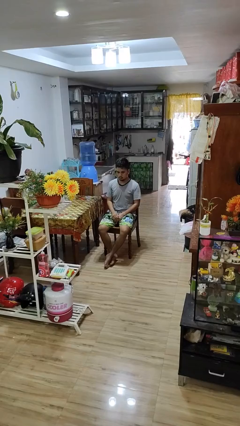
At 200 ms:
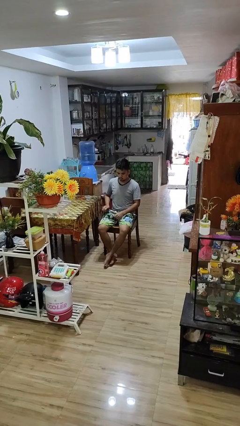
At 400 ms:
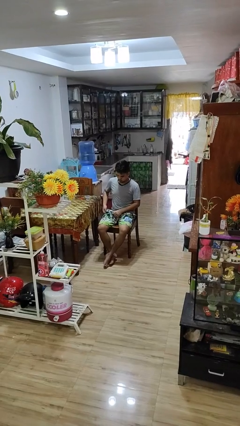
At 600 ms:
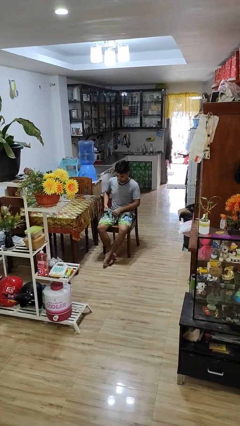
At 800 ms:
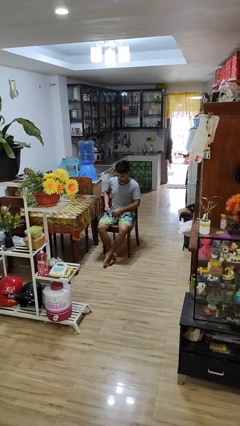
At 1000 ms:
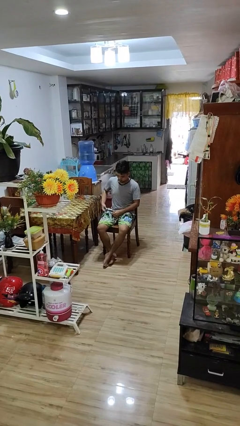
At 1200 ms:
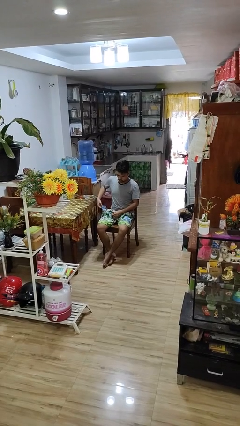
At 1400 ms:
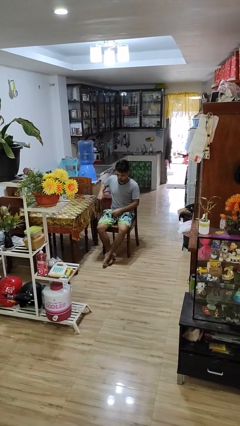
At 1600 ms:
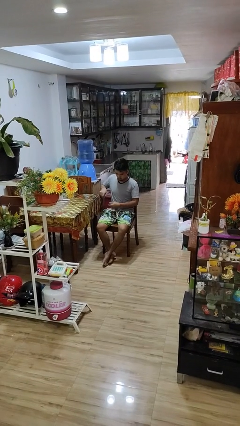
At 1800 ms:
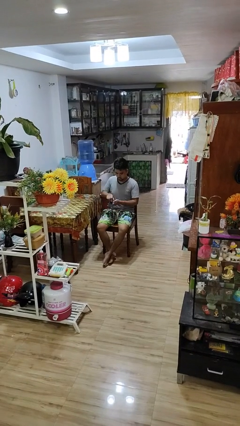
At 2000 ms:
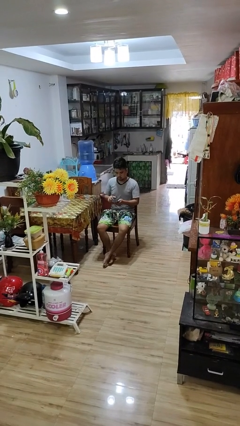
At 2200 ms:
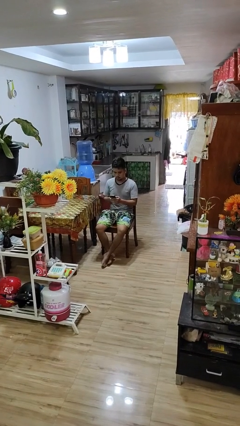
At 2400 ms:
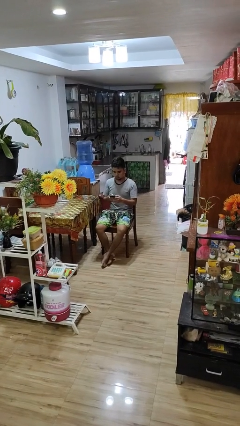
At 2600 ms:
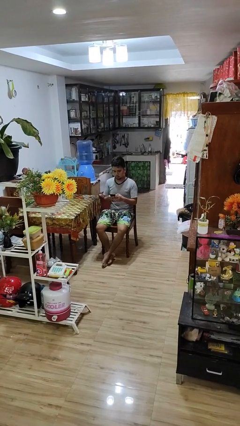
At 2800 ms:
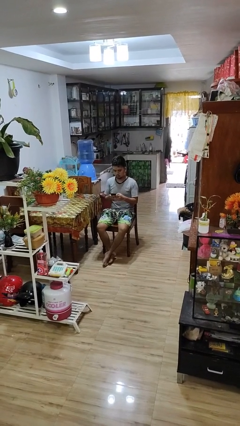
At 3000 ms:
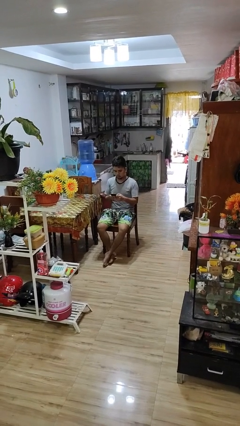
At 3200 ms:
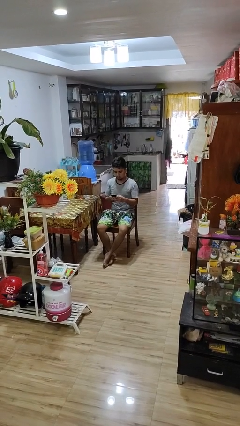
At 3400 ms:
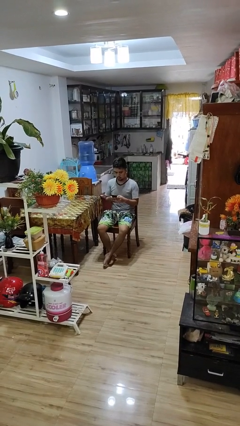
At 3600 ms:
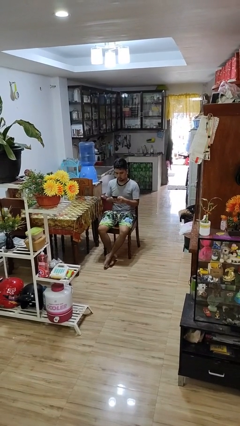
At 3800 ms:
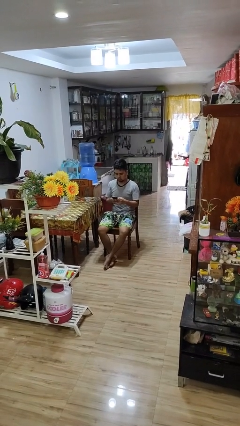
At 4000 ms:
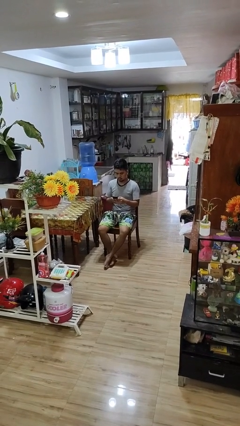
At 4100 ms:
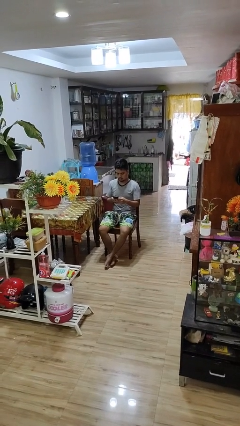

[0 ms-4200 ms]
person takes phone from pocket

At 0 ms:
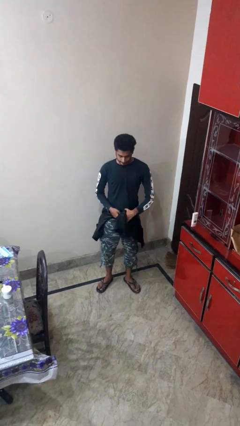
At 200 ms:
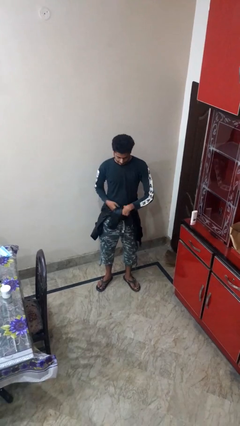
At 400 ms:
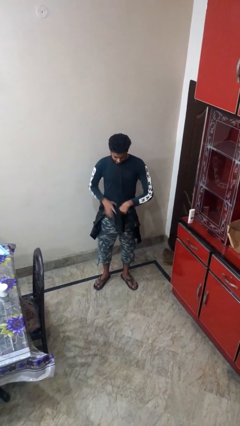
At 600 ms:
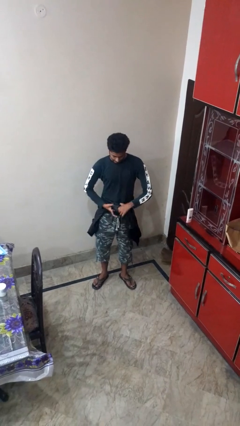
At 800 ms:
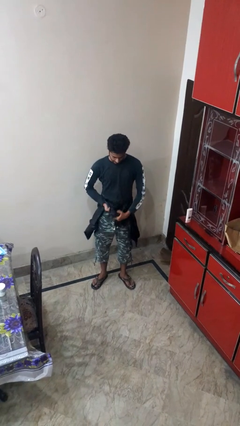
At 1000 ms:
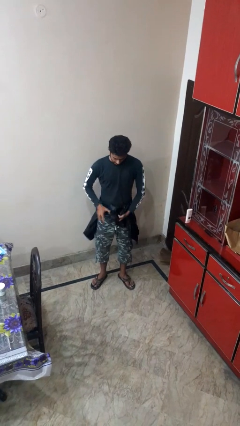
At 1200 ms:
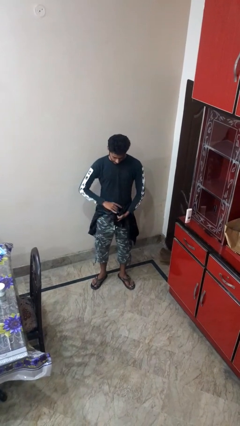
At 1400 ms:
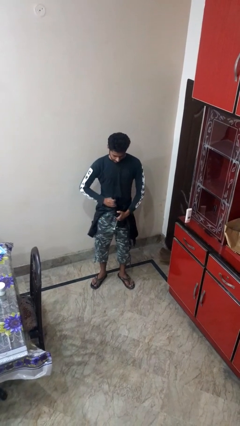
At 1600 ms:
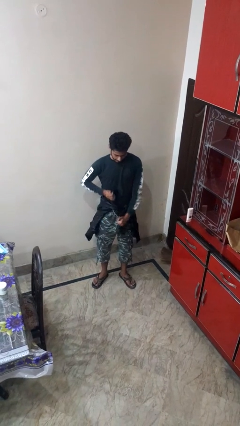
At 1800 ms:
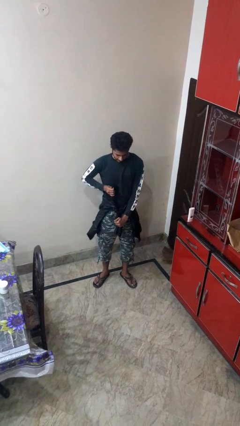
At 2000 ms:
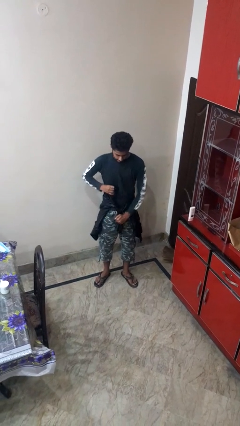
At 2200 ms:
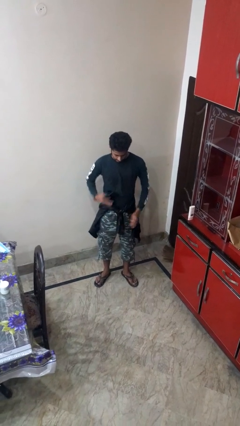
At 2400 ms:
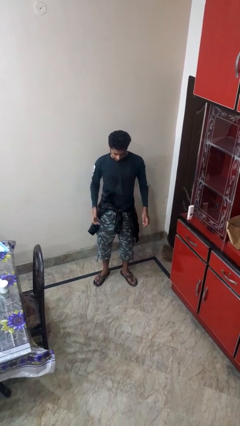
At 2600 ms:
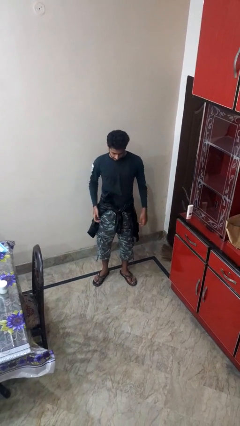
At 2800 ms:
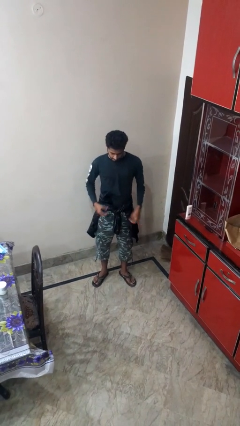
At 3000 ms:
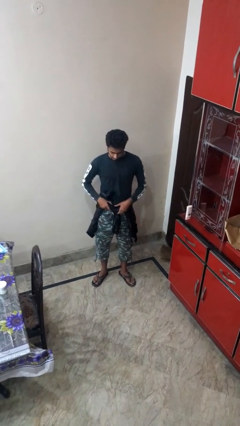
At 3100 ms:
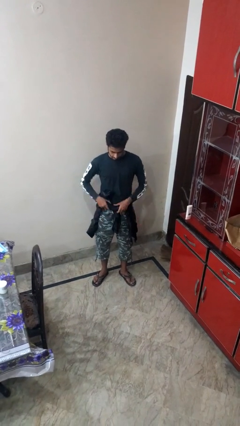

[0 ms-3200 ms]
person ties jacket around waist

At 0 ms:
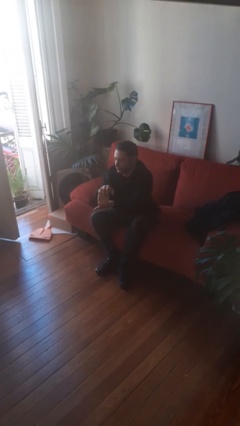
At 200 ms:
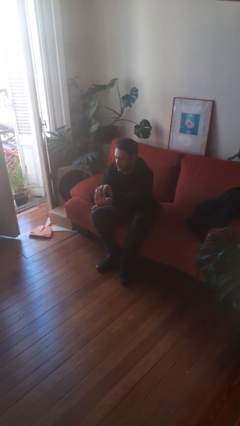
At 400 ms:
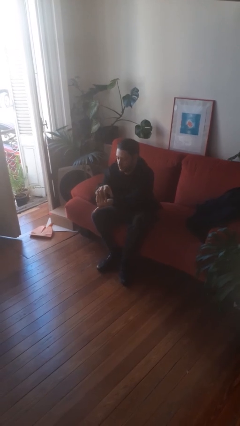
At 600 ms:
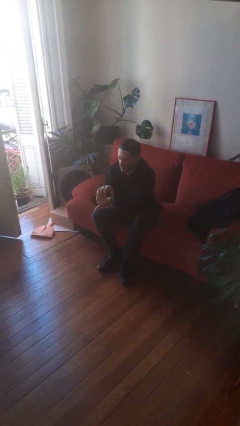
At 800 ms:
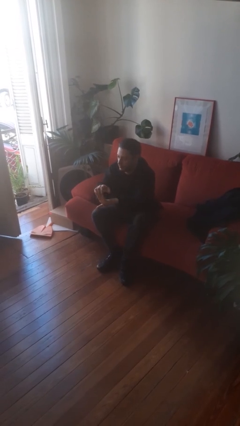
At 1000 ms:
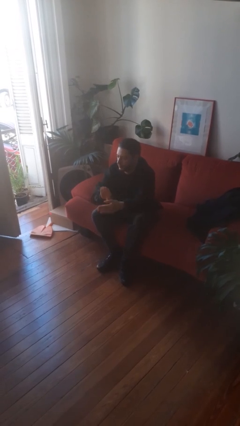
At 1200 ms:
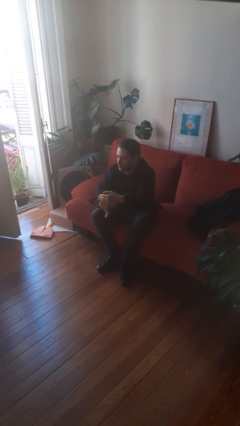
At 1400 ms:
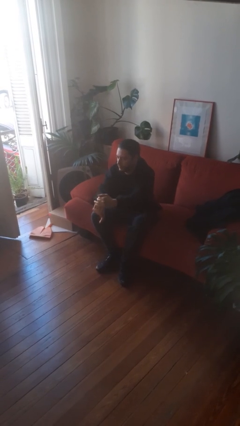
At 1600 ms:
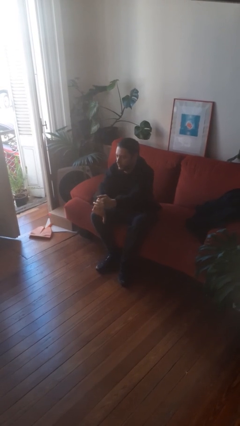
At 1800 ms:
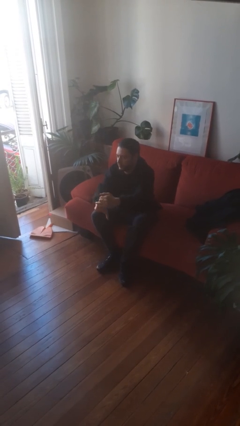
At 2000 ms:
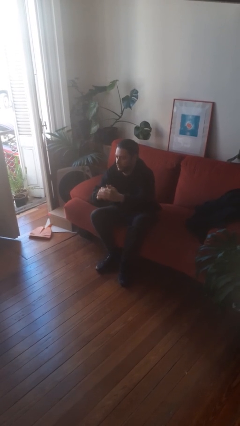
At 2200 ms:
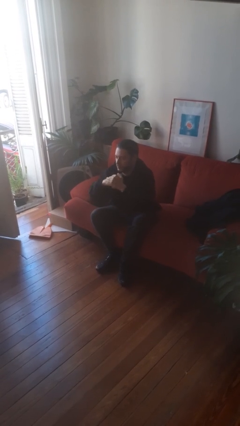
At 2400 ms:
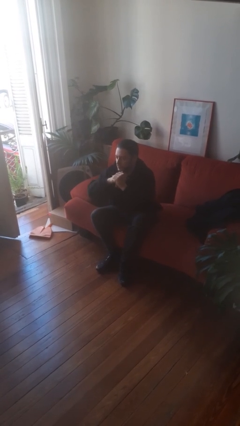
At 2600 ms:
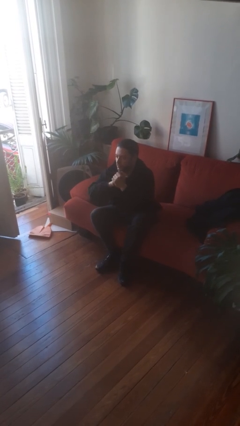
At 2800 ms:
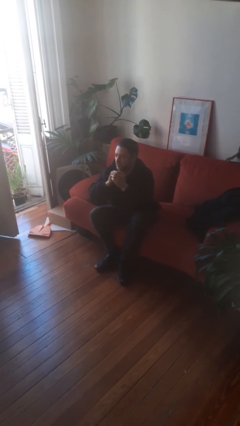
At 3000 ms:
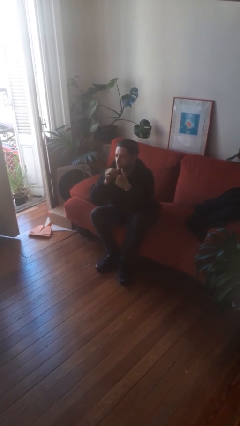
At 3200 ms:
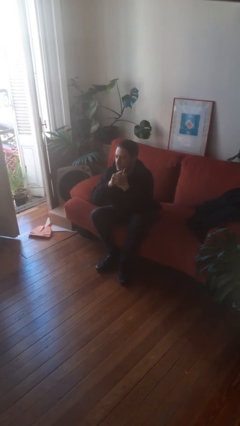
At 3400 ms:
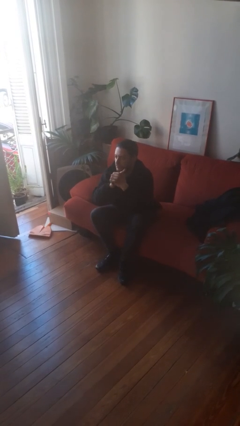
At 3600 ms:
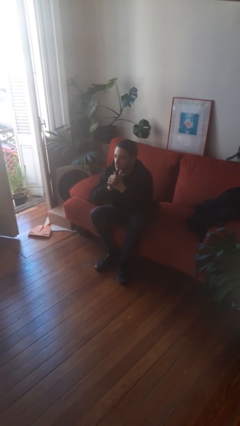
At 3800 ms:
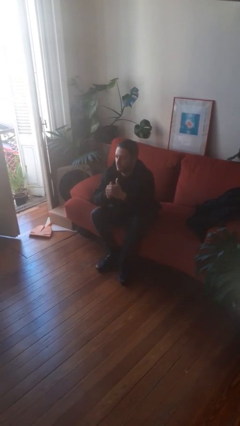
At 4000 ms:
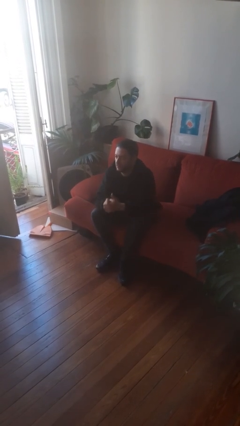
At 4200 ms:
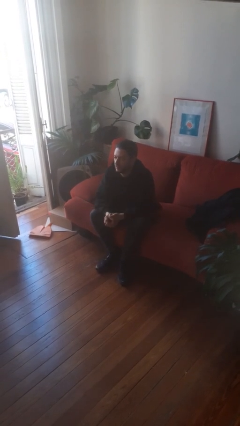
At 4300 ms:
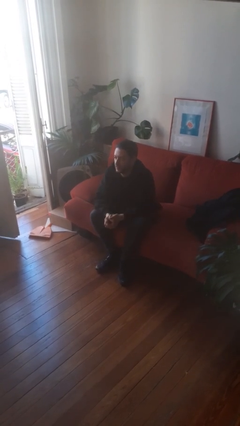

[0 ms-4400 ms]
person cracks knuckles

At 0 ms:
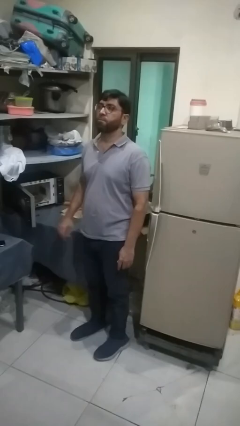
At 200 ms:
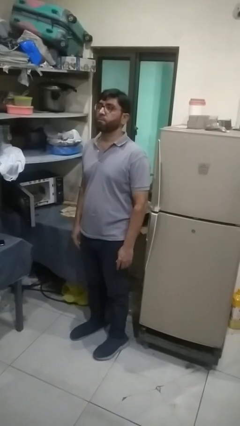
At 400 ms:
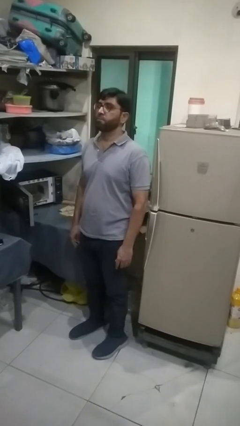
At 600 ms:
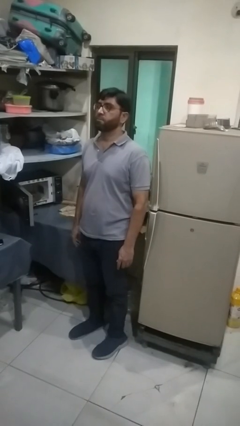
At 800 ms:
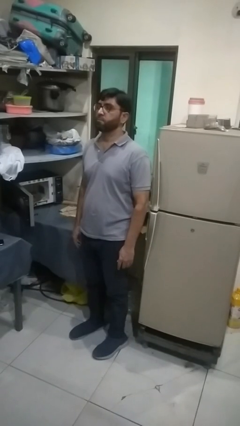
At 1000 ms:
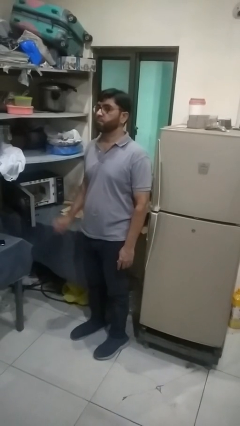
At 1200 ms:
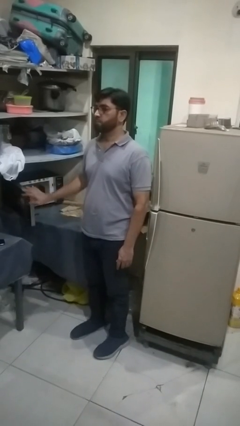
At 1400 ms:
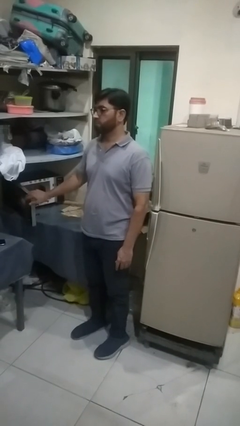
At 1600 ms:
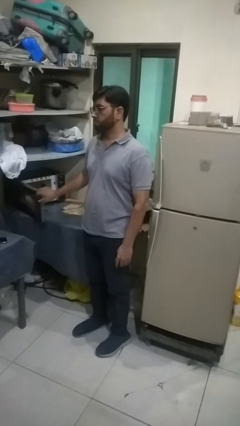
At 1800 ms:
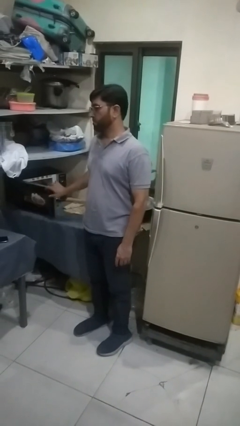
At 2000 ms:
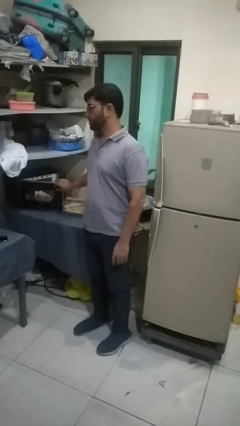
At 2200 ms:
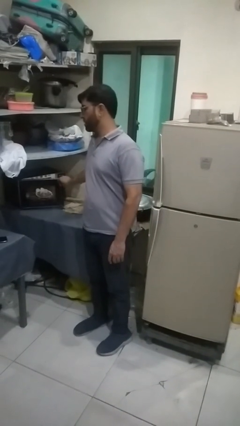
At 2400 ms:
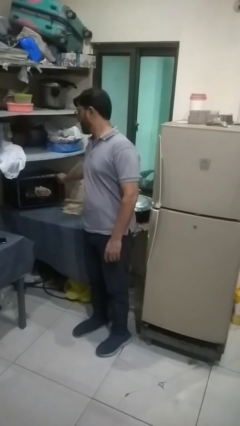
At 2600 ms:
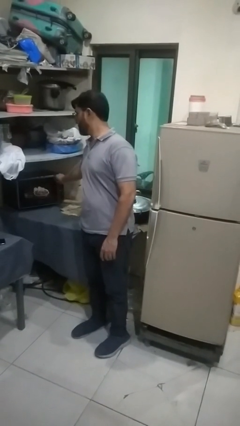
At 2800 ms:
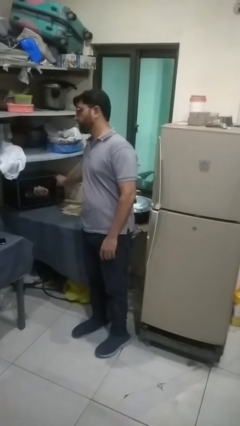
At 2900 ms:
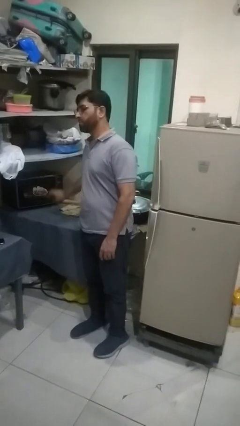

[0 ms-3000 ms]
person closes oven door

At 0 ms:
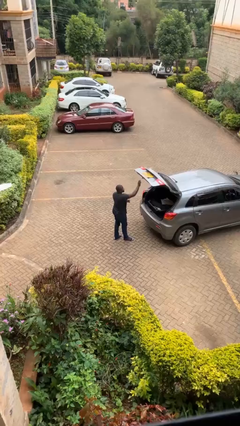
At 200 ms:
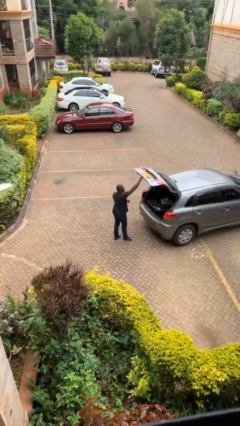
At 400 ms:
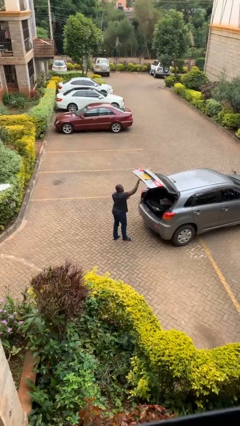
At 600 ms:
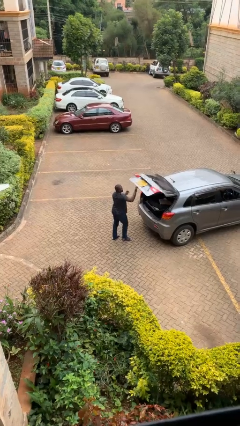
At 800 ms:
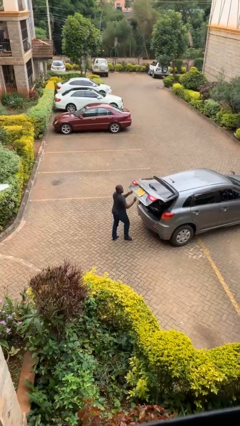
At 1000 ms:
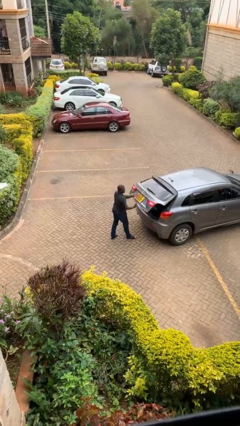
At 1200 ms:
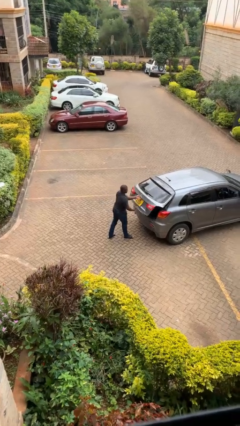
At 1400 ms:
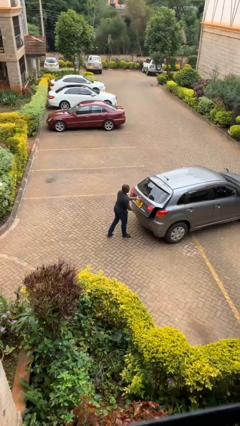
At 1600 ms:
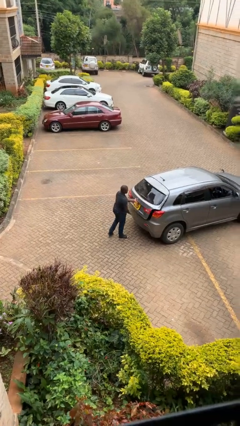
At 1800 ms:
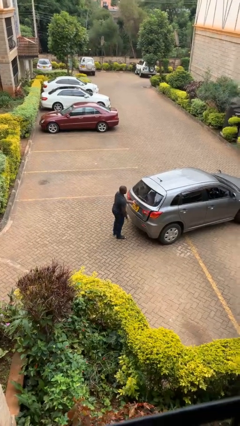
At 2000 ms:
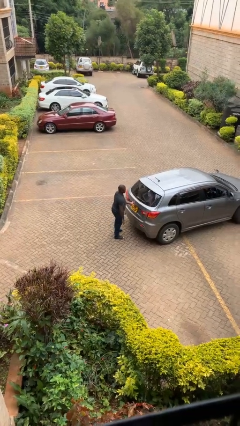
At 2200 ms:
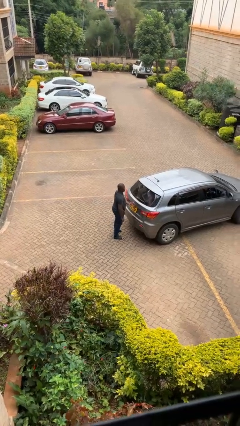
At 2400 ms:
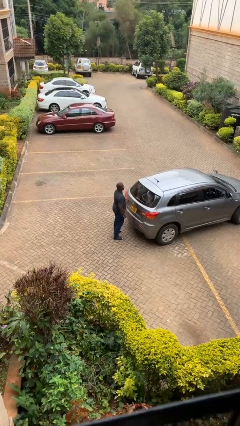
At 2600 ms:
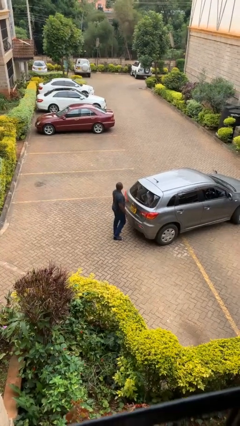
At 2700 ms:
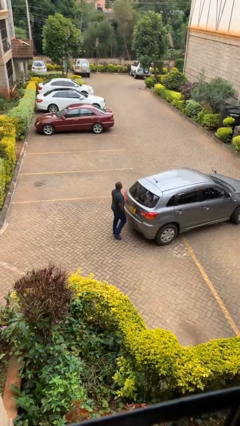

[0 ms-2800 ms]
person closes car trunk
